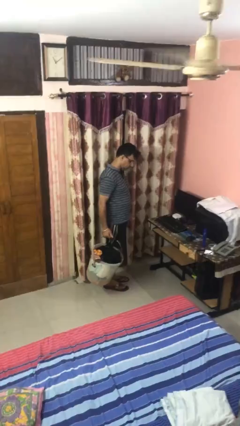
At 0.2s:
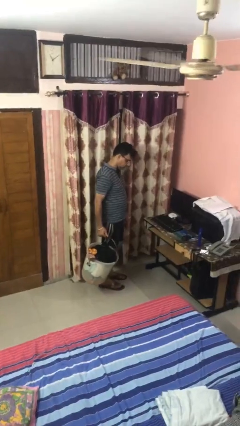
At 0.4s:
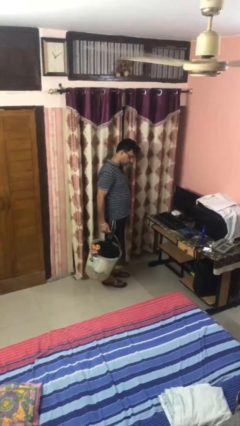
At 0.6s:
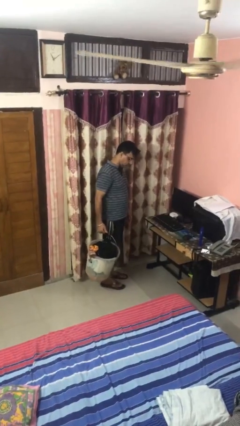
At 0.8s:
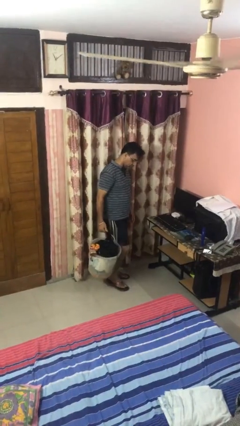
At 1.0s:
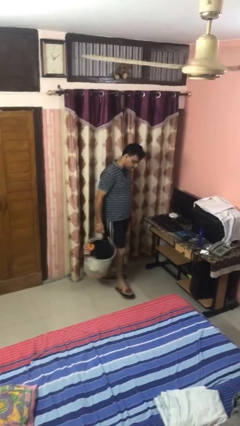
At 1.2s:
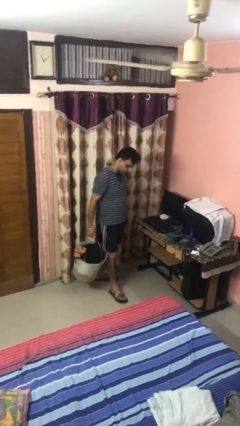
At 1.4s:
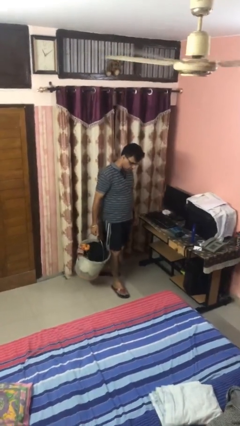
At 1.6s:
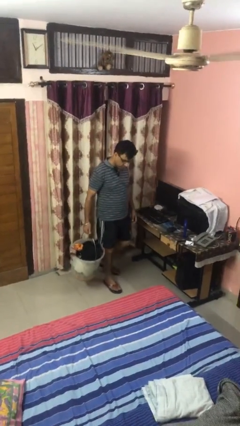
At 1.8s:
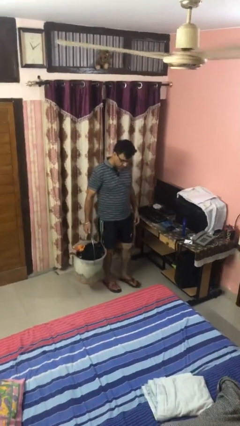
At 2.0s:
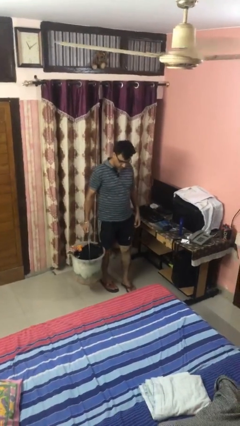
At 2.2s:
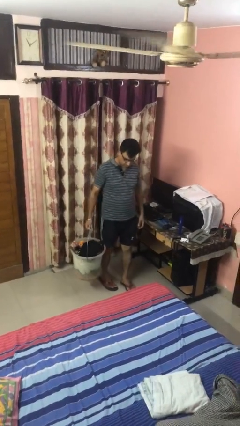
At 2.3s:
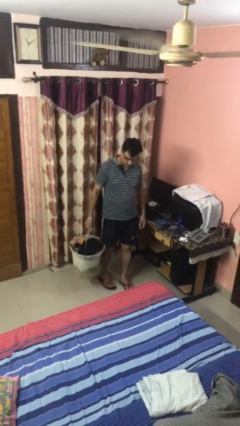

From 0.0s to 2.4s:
person carries laundry basket

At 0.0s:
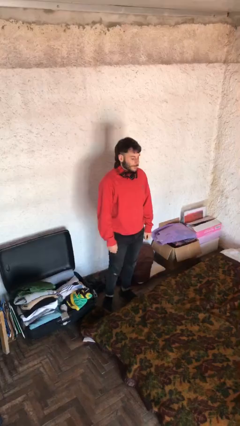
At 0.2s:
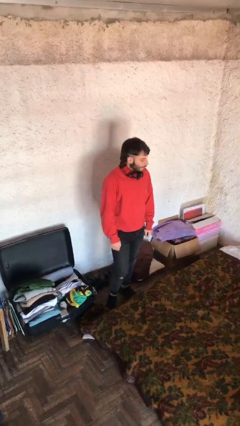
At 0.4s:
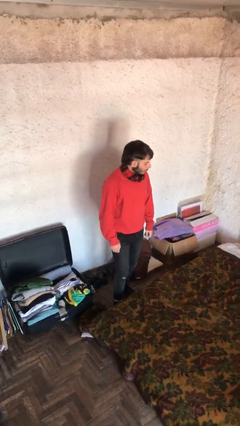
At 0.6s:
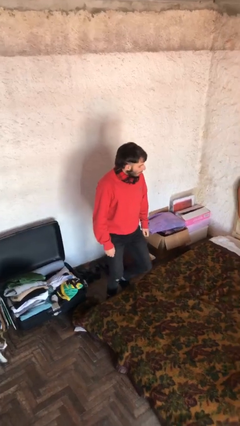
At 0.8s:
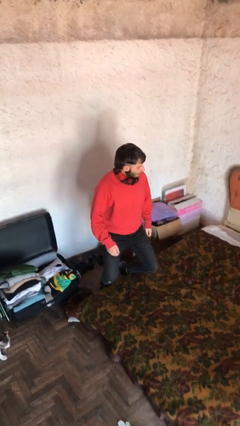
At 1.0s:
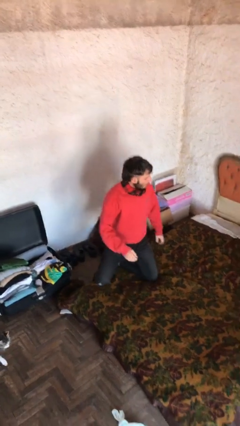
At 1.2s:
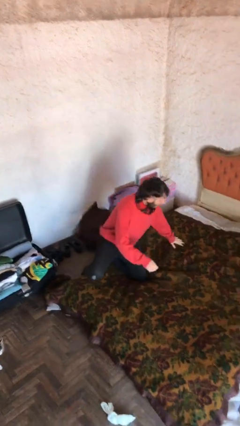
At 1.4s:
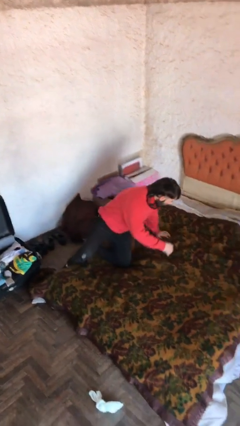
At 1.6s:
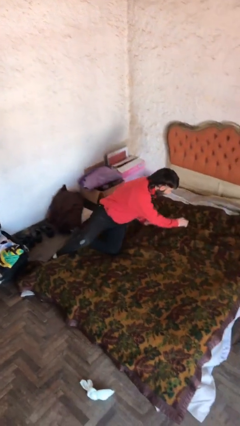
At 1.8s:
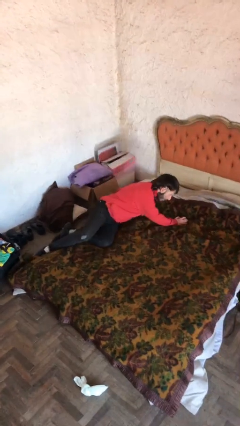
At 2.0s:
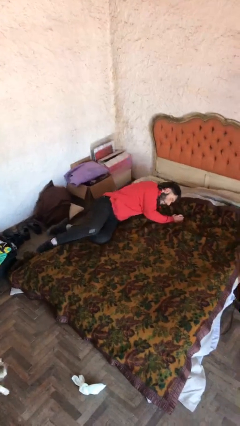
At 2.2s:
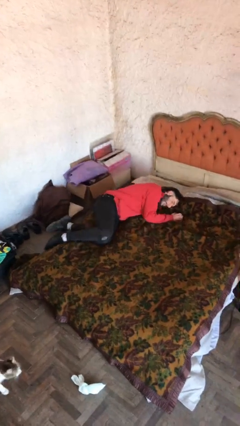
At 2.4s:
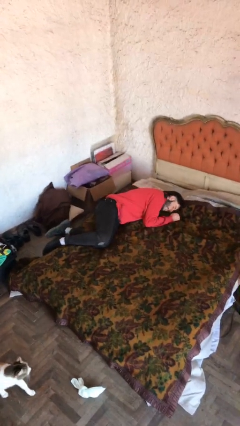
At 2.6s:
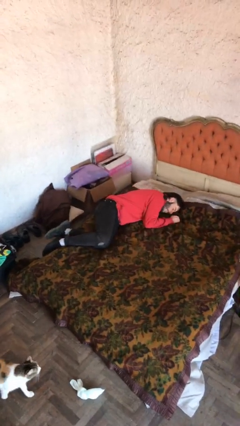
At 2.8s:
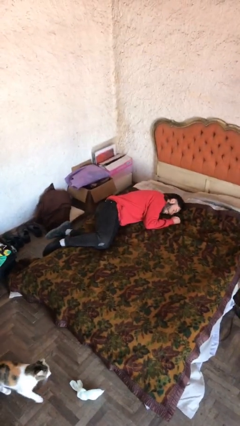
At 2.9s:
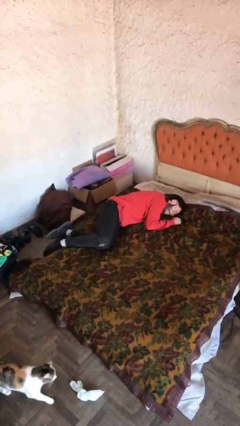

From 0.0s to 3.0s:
person lies down on bed

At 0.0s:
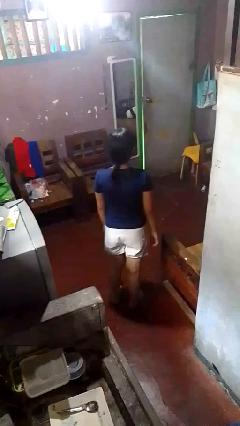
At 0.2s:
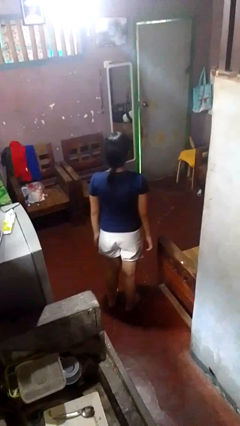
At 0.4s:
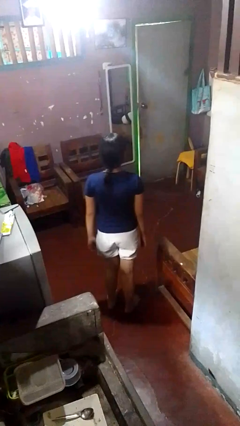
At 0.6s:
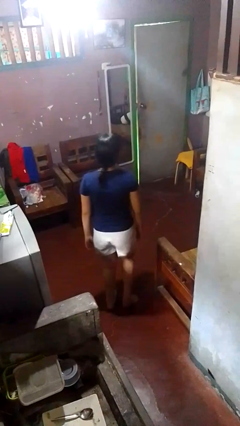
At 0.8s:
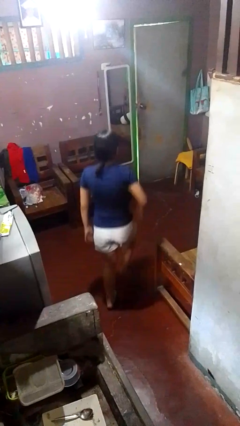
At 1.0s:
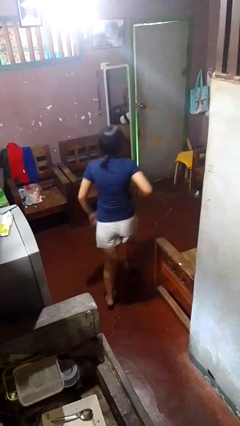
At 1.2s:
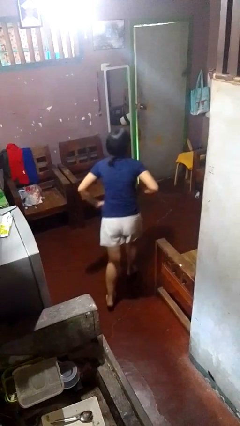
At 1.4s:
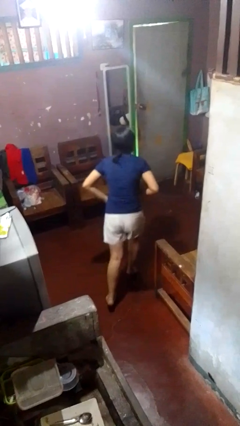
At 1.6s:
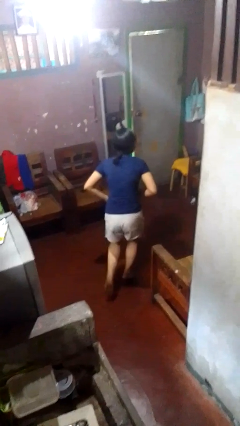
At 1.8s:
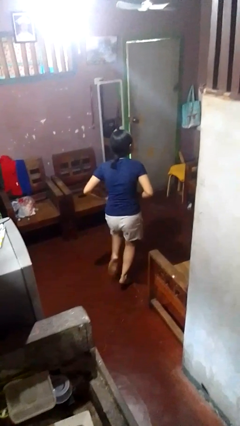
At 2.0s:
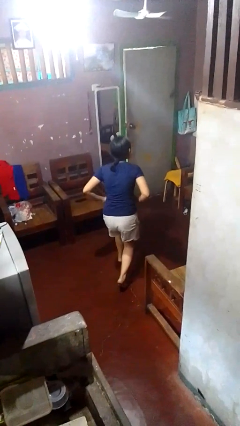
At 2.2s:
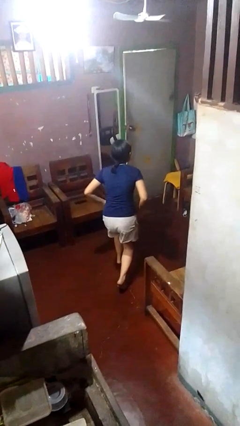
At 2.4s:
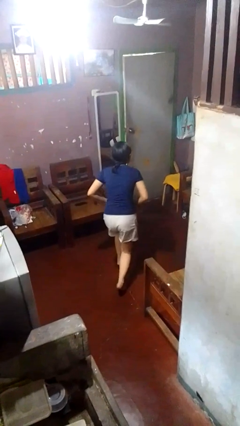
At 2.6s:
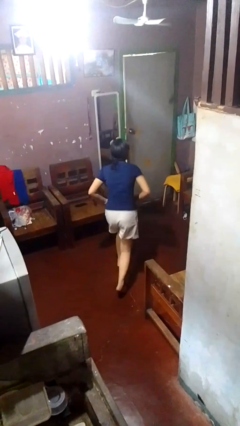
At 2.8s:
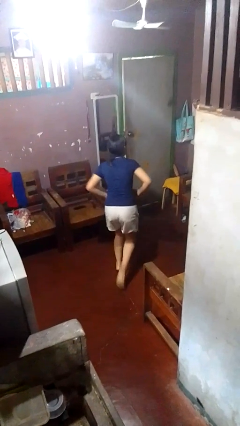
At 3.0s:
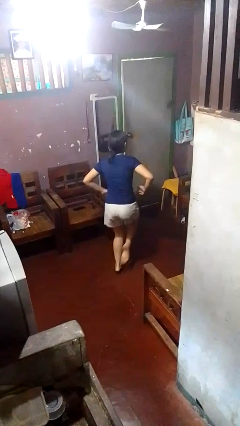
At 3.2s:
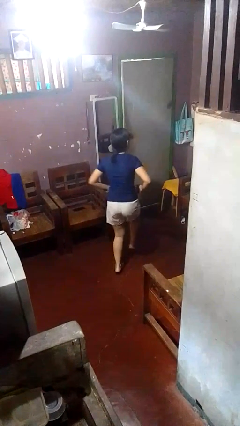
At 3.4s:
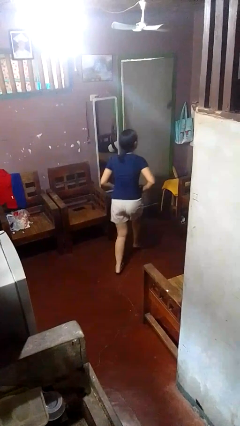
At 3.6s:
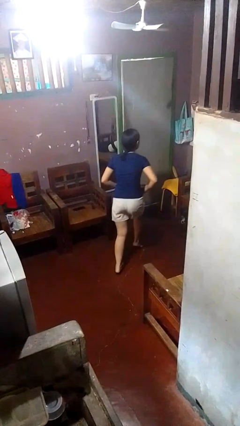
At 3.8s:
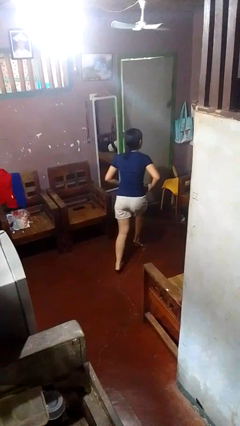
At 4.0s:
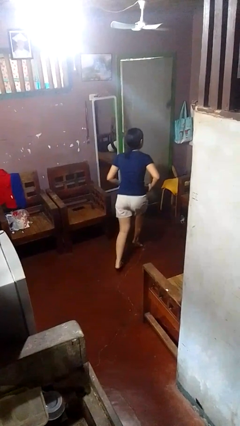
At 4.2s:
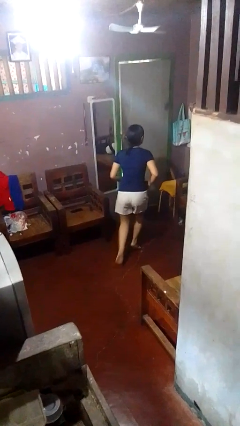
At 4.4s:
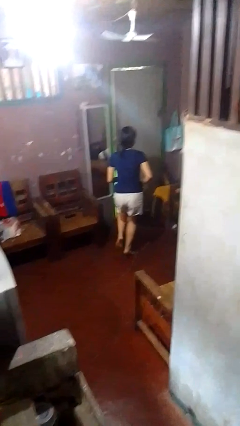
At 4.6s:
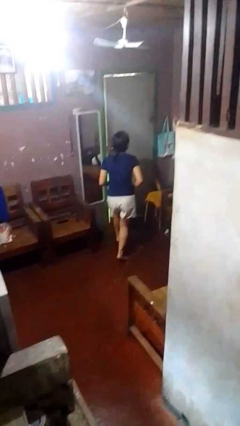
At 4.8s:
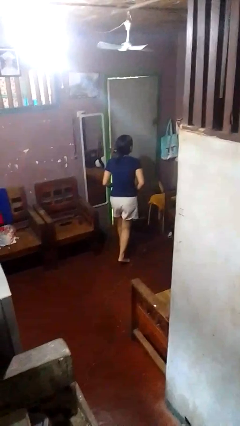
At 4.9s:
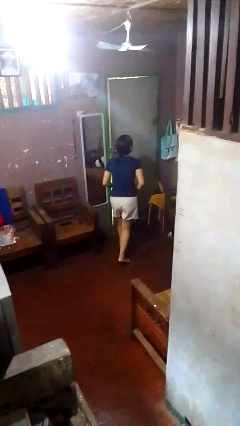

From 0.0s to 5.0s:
person walks tiptoe

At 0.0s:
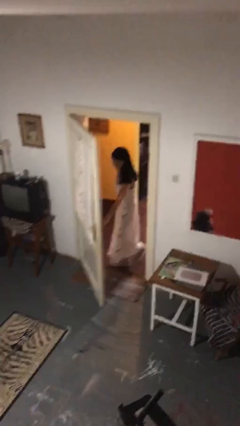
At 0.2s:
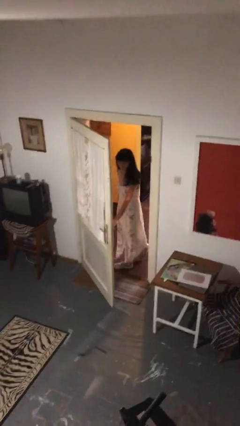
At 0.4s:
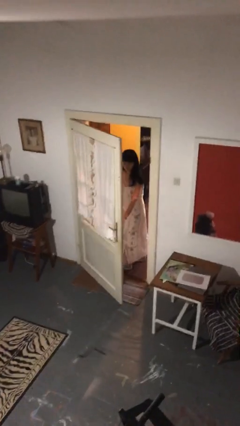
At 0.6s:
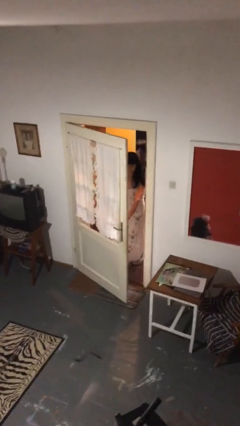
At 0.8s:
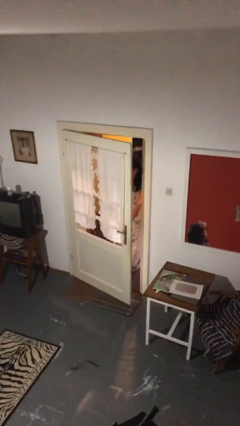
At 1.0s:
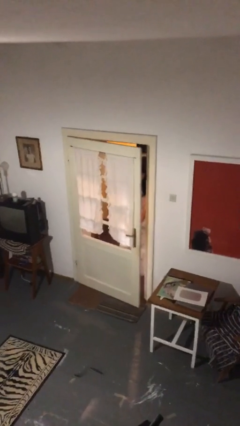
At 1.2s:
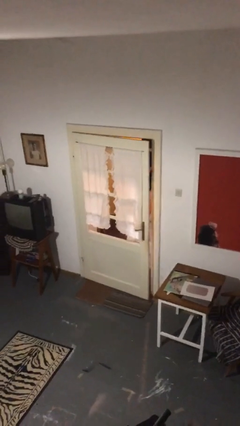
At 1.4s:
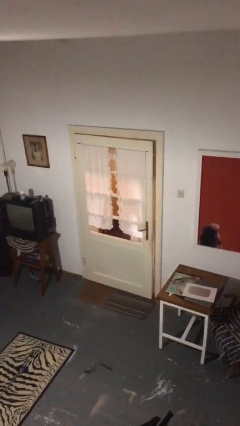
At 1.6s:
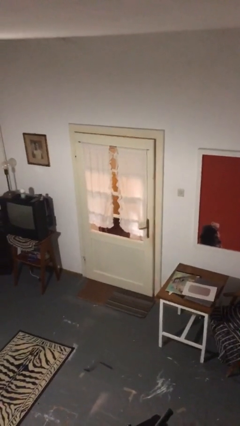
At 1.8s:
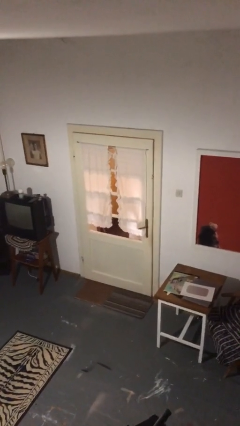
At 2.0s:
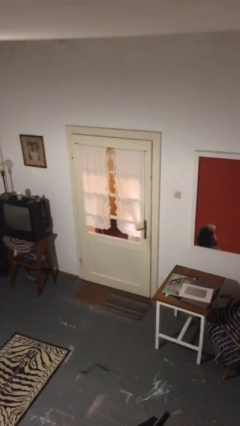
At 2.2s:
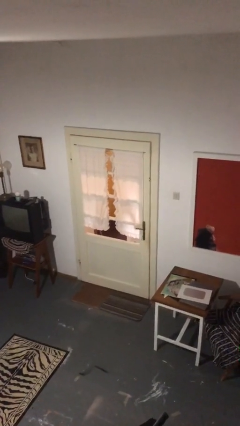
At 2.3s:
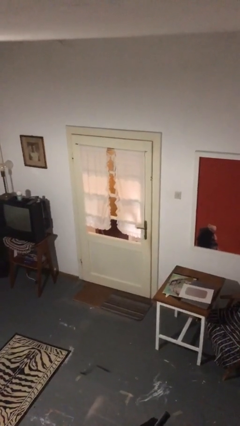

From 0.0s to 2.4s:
person closes facility door

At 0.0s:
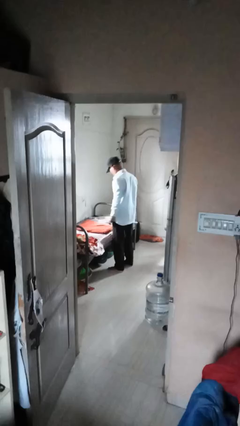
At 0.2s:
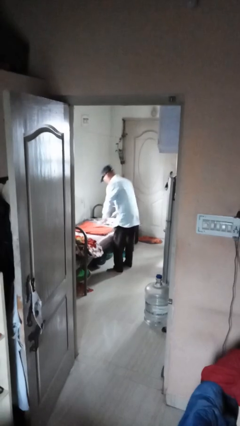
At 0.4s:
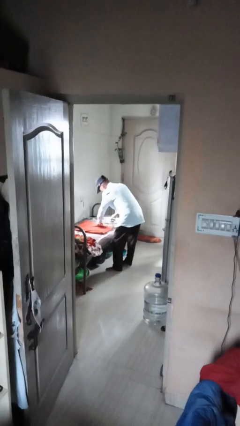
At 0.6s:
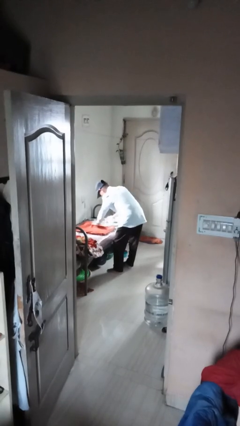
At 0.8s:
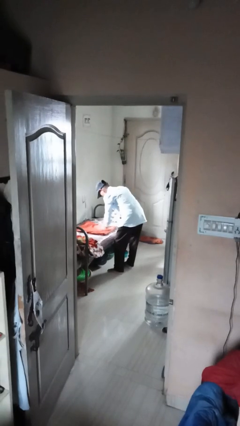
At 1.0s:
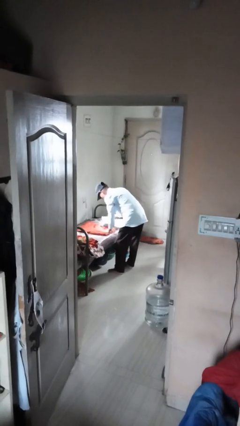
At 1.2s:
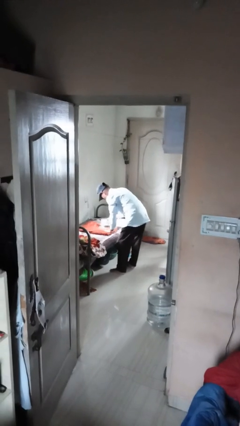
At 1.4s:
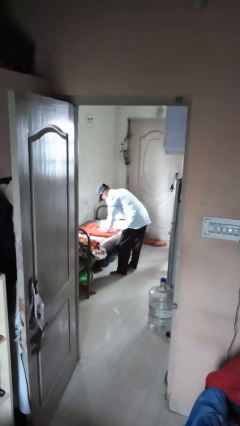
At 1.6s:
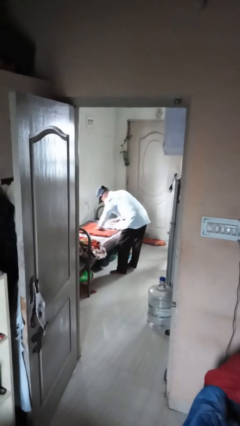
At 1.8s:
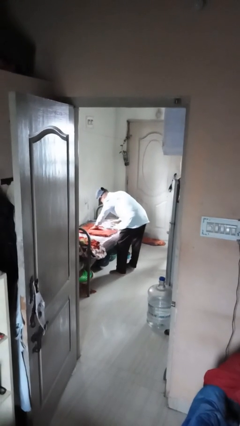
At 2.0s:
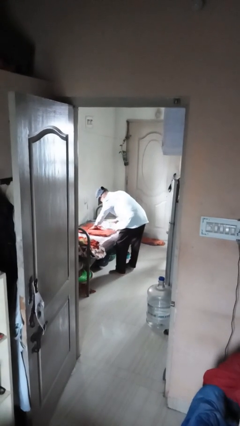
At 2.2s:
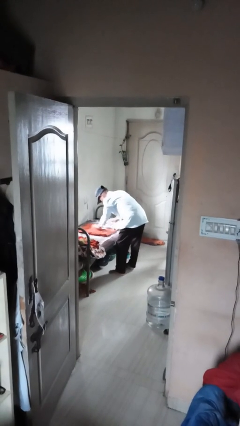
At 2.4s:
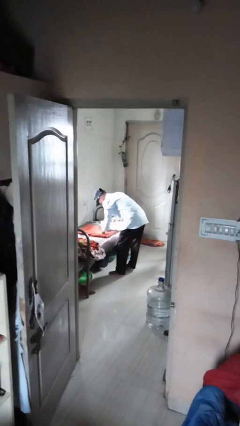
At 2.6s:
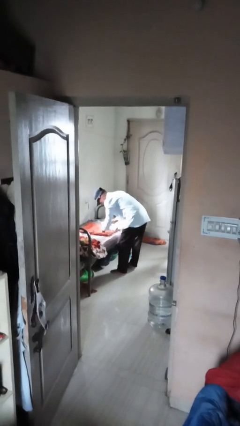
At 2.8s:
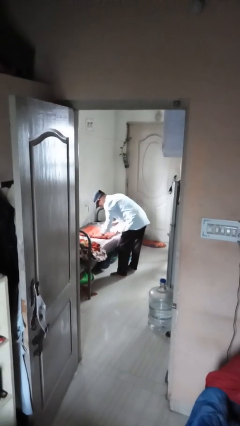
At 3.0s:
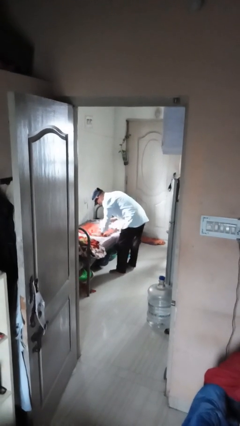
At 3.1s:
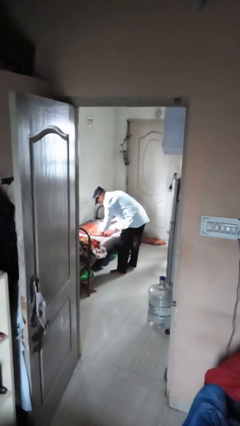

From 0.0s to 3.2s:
person irons clothes

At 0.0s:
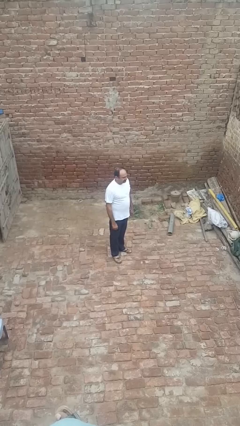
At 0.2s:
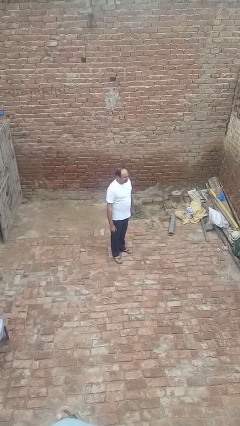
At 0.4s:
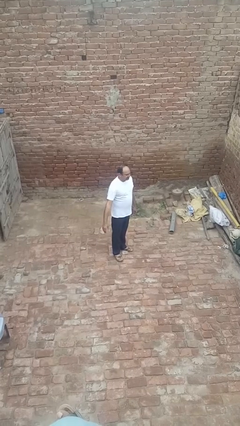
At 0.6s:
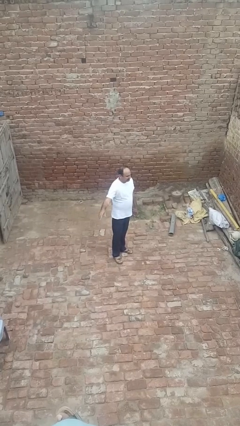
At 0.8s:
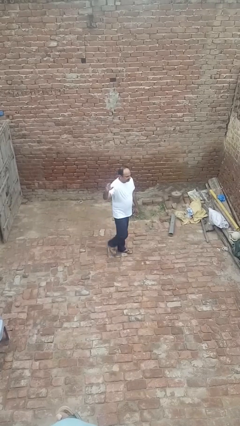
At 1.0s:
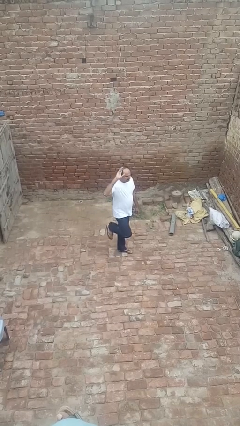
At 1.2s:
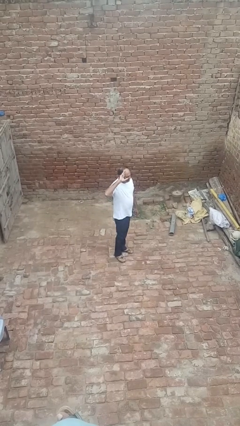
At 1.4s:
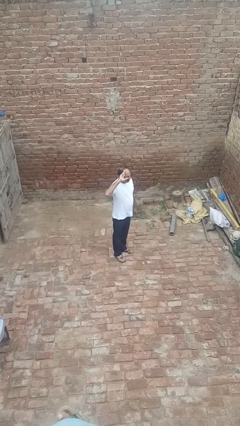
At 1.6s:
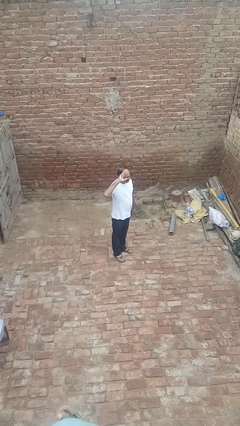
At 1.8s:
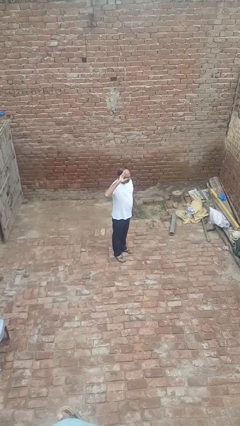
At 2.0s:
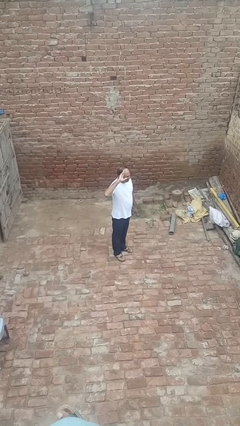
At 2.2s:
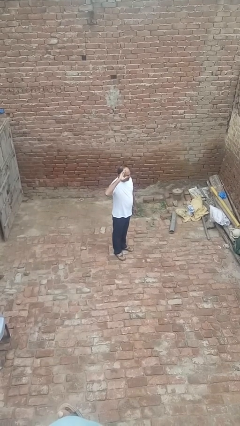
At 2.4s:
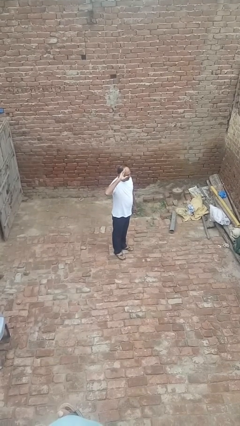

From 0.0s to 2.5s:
person salutes
